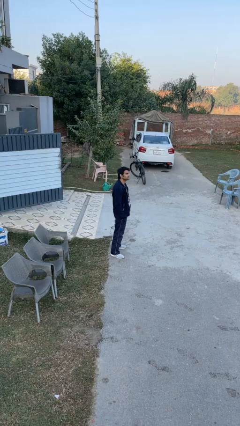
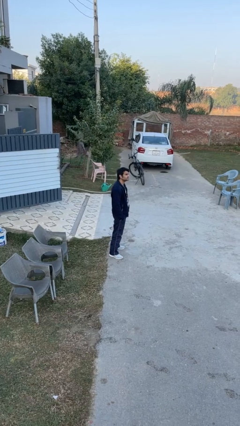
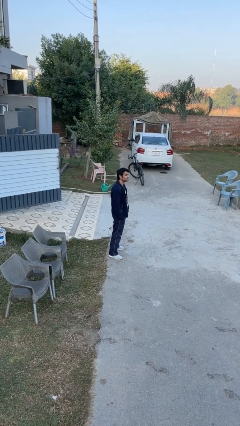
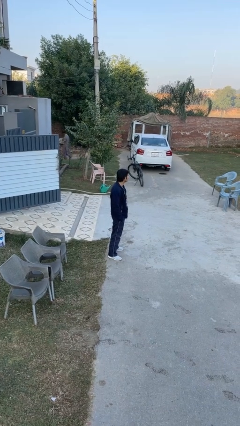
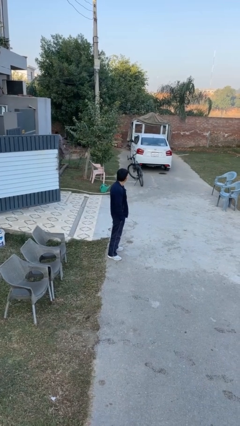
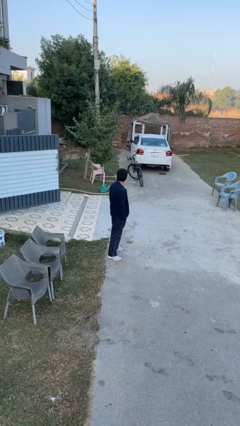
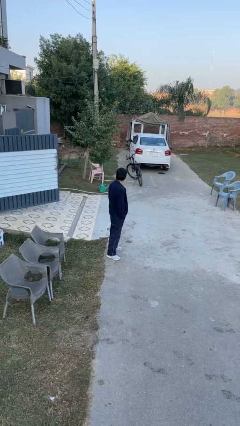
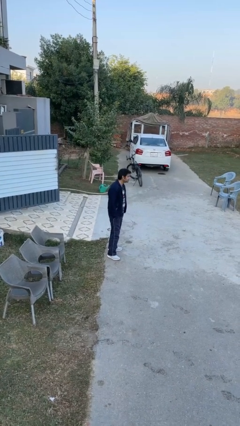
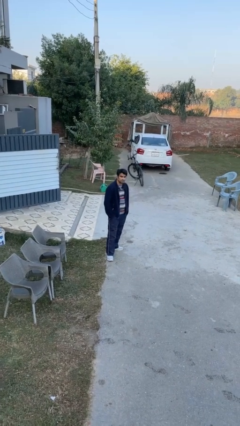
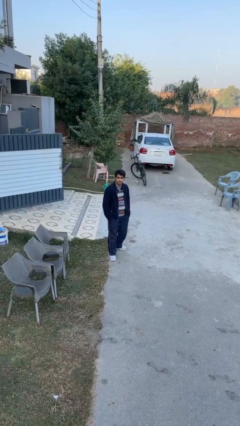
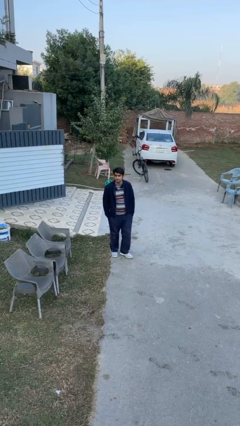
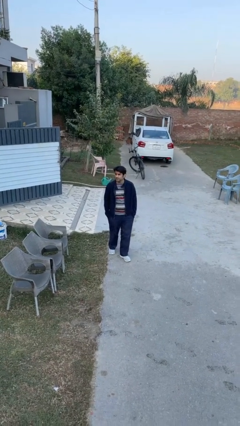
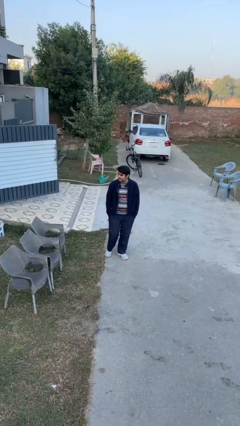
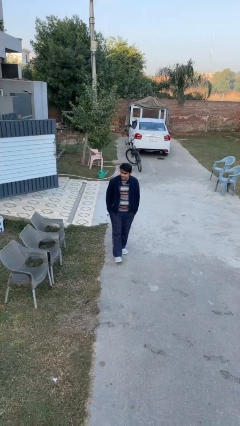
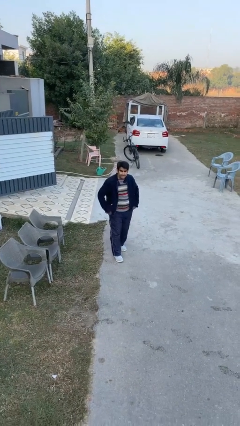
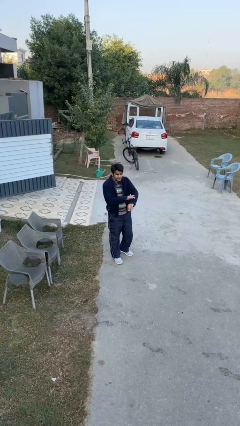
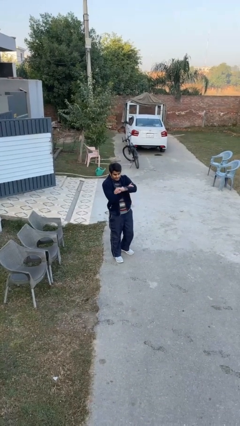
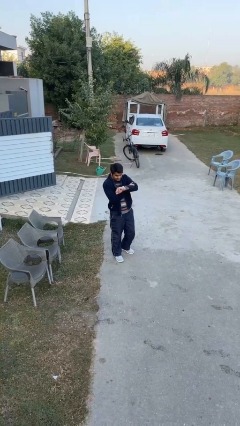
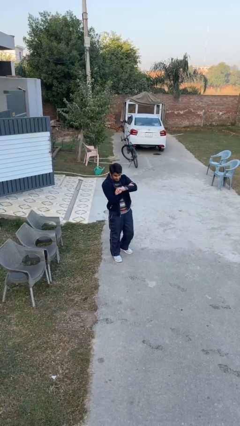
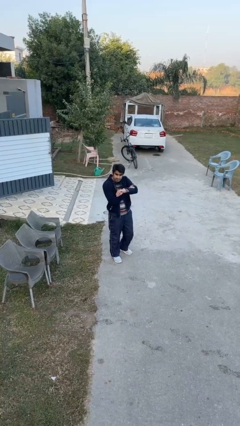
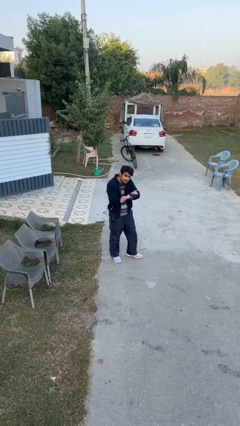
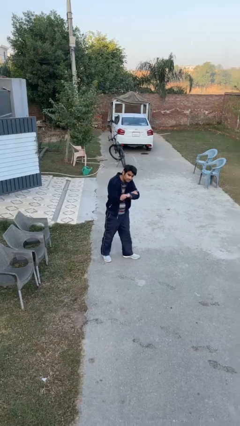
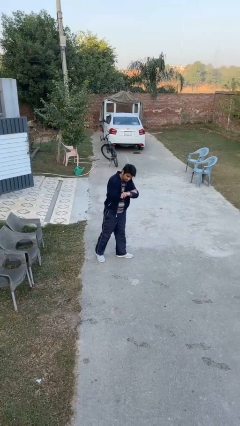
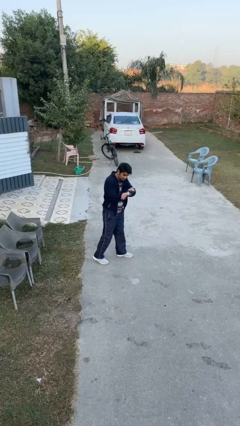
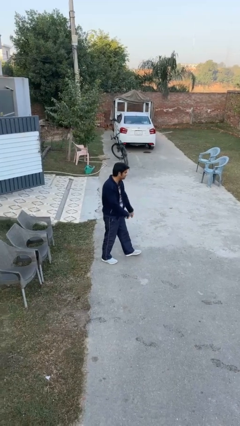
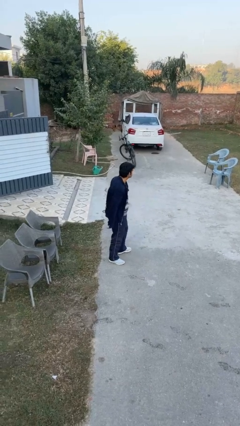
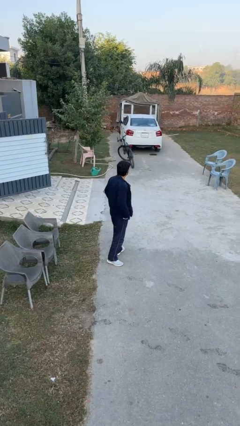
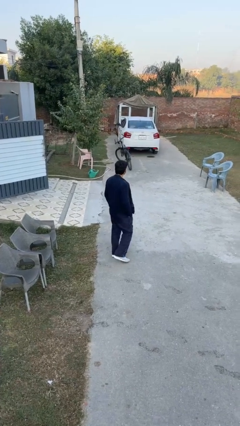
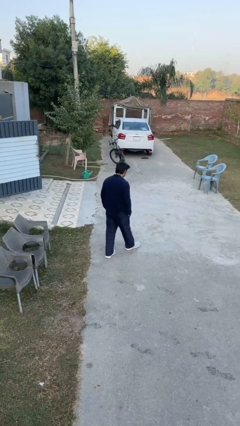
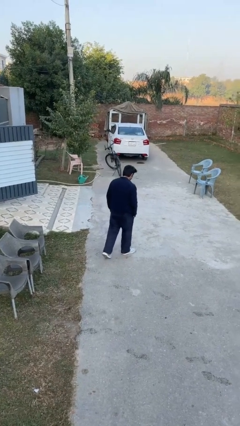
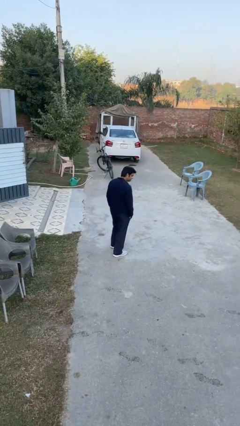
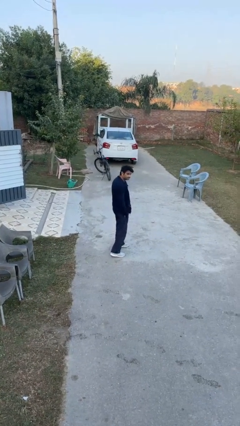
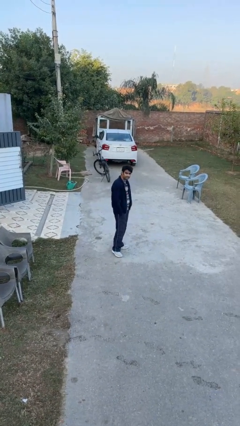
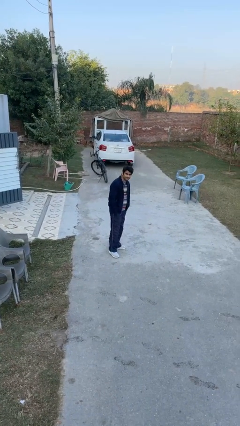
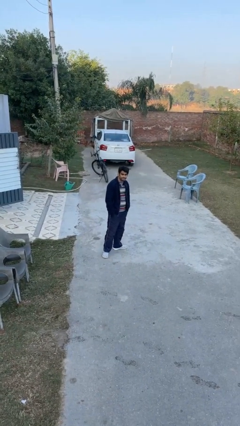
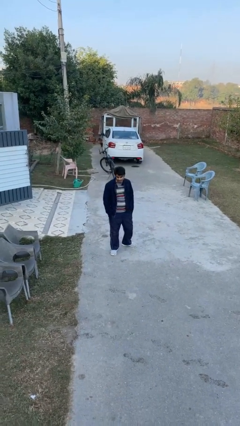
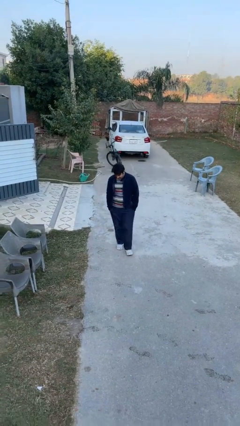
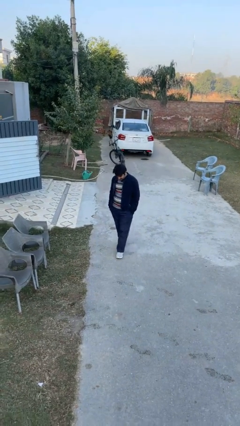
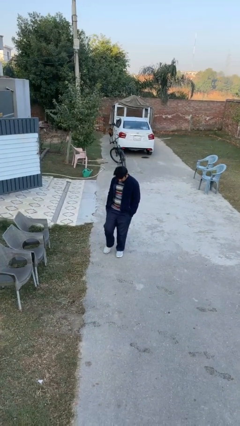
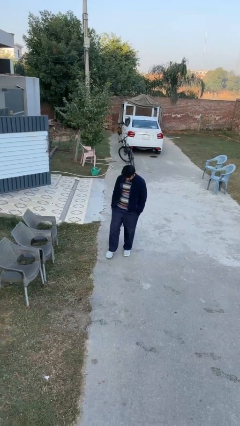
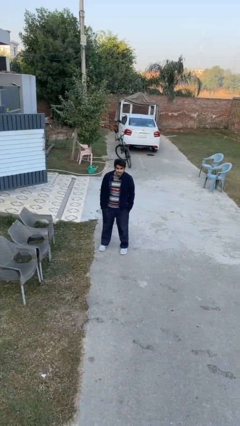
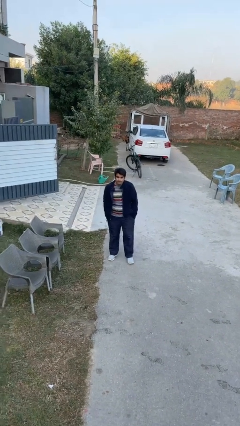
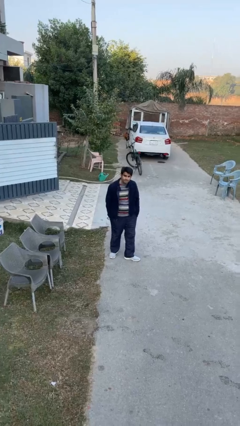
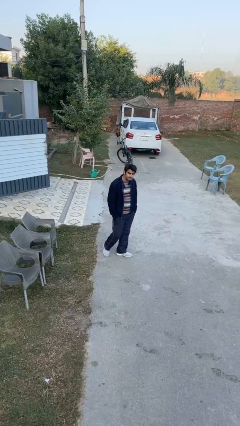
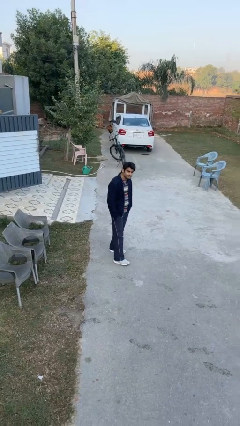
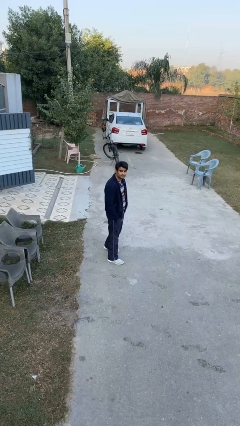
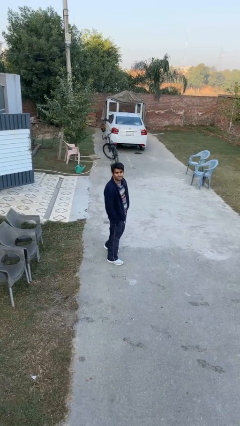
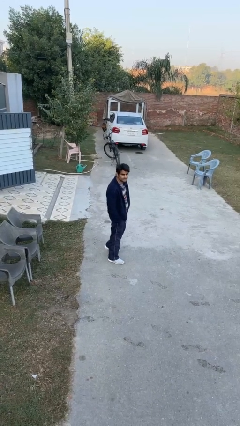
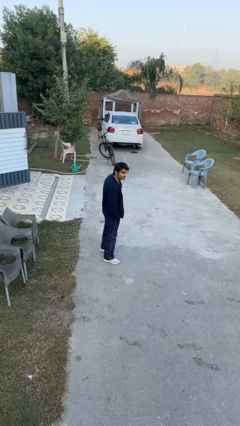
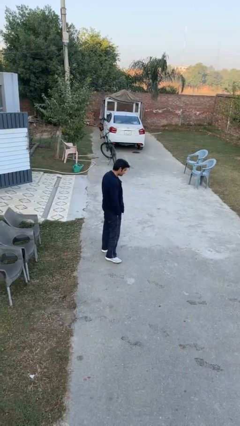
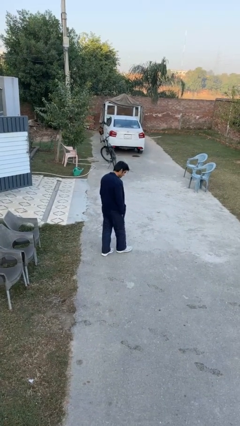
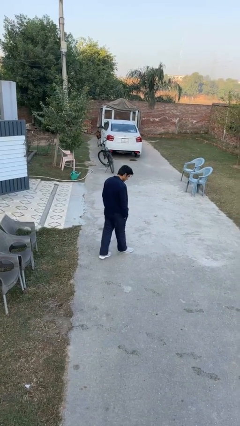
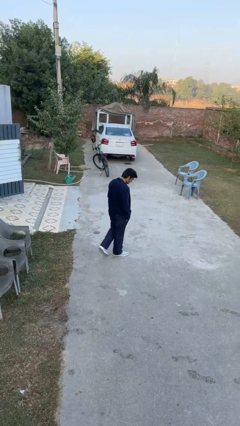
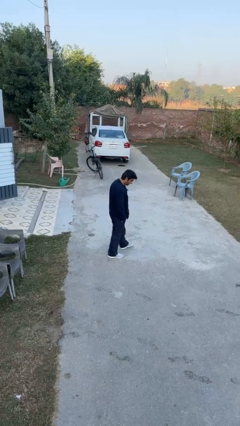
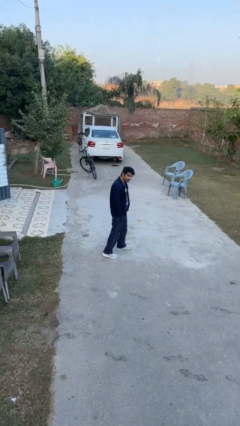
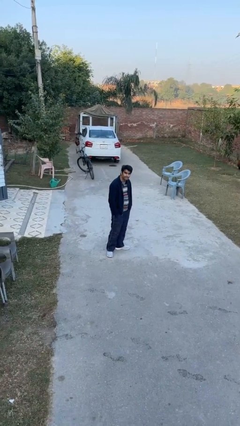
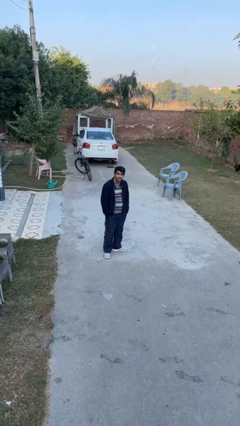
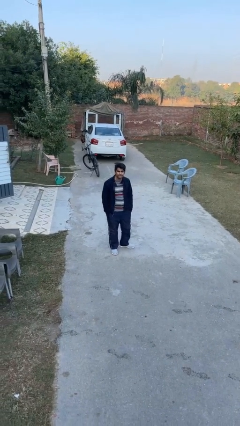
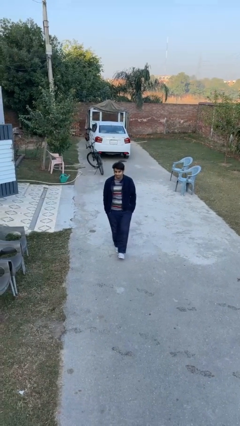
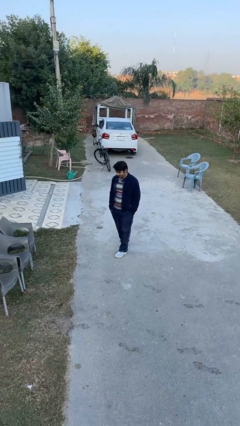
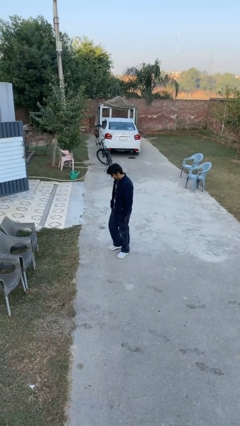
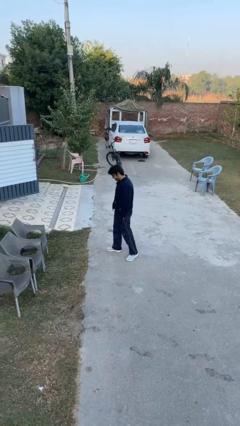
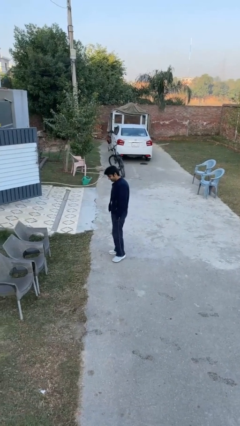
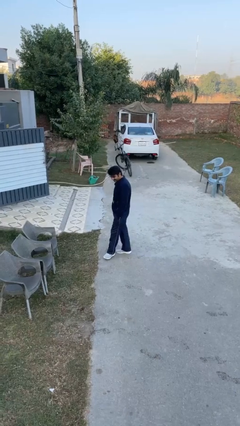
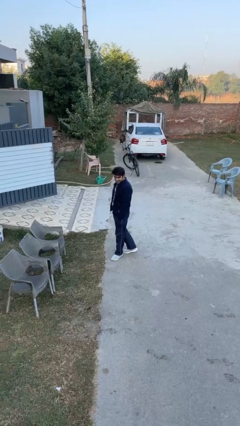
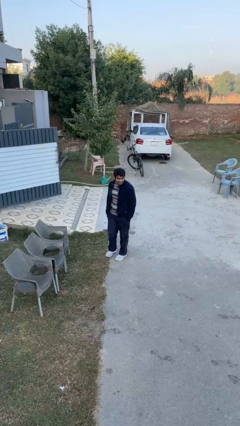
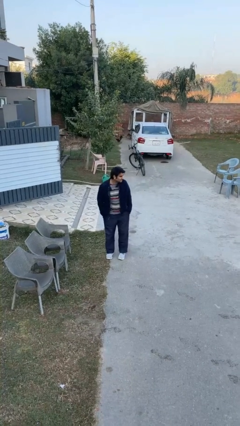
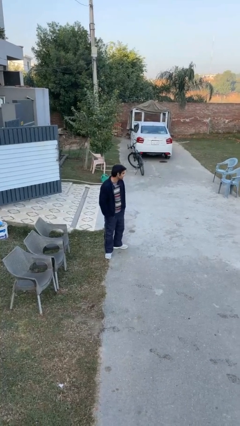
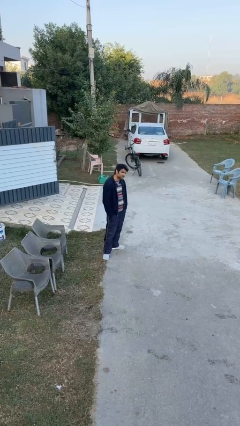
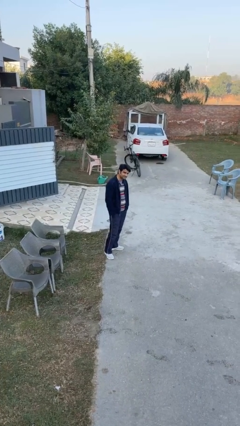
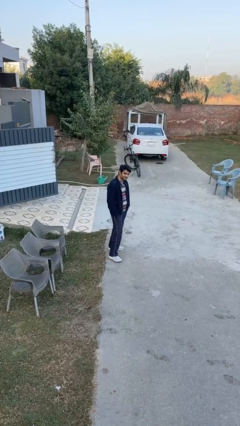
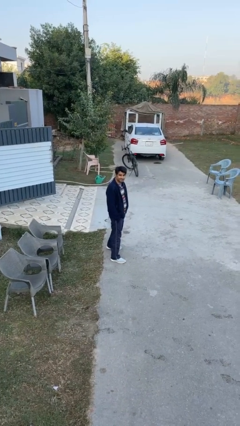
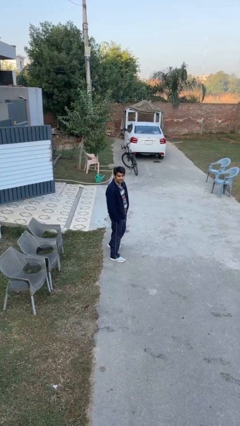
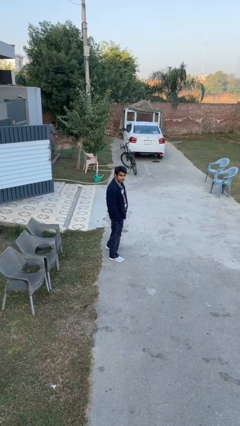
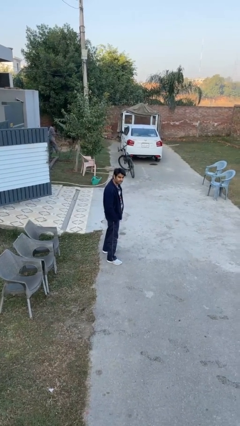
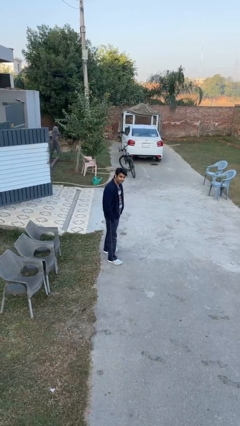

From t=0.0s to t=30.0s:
person walks

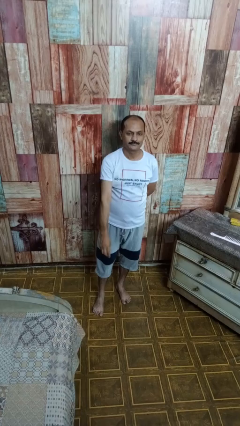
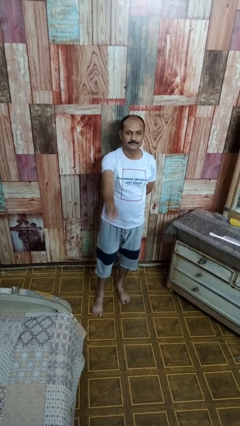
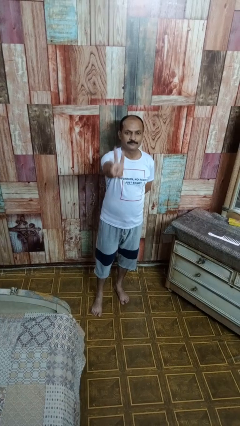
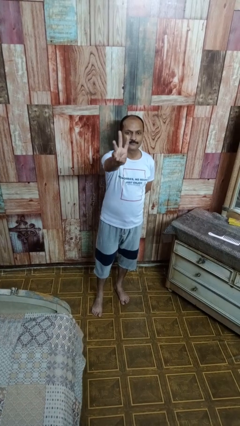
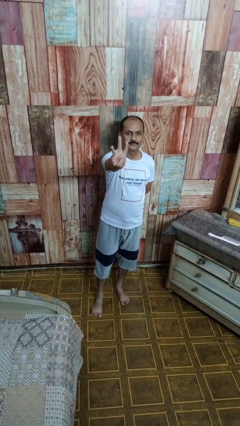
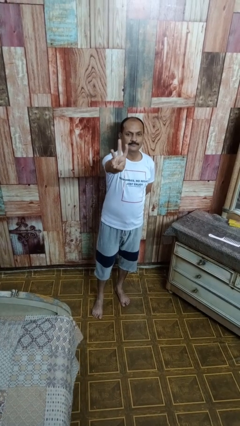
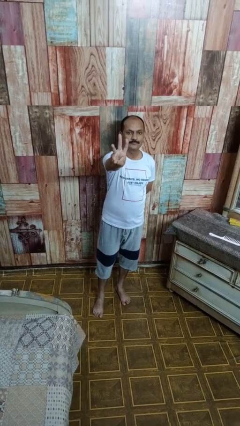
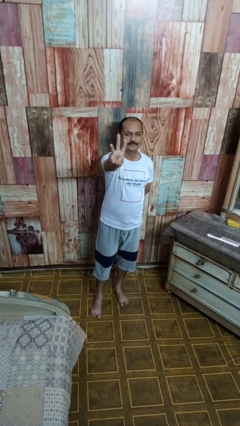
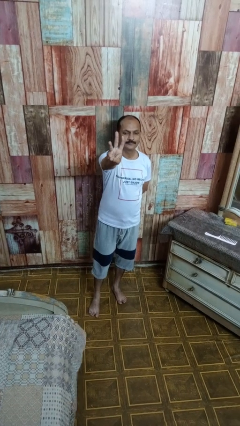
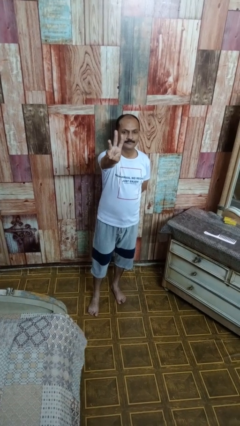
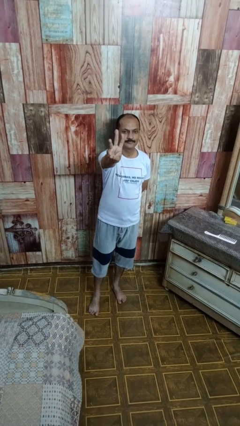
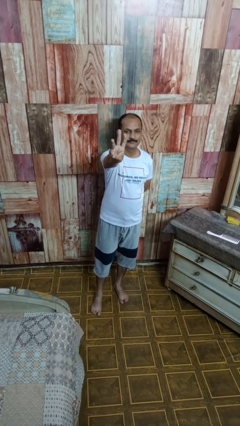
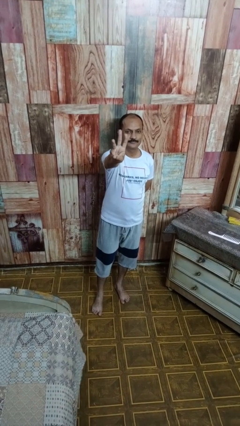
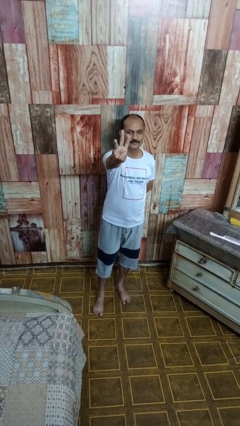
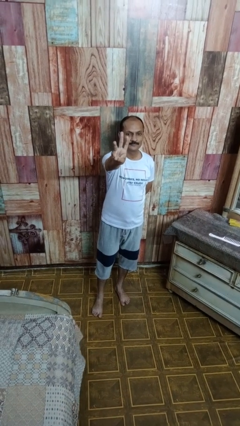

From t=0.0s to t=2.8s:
person gestures number three

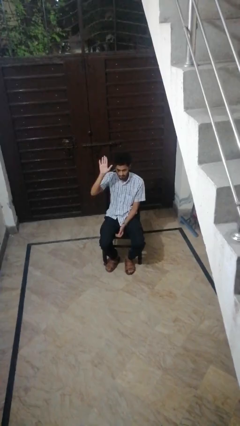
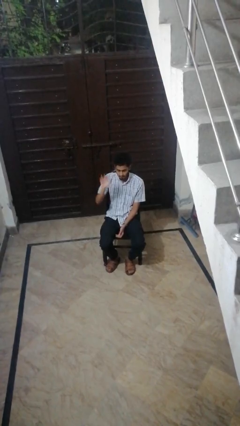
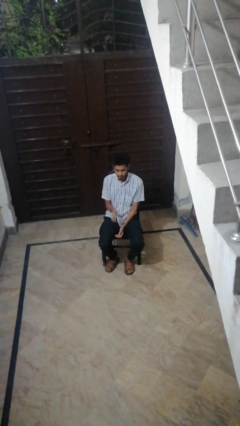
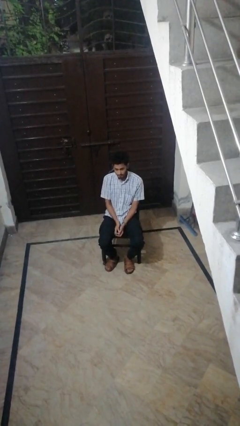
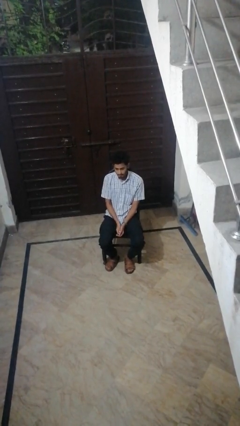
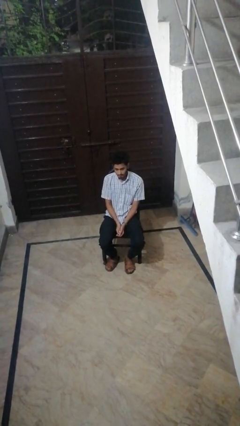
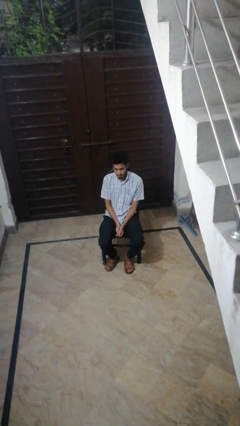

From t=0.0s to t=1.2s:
person gestures lower hand
